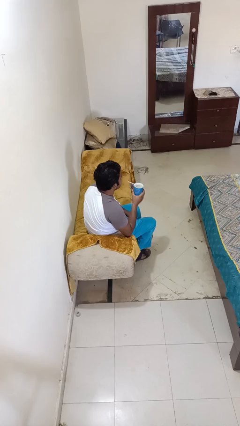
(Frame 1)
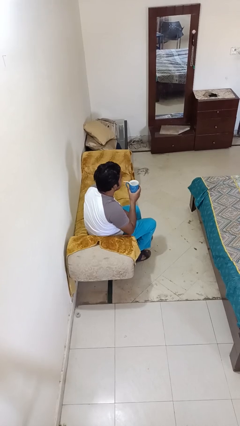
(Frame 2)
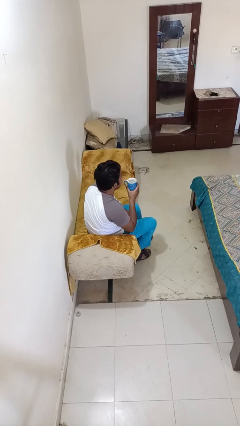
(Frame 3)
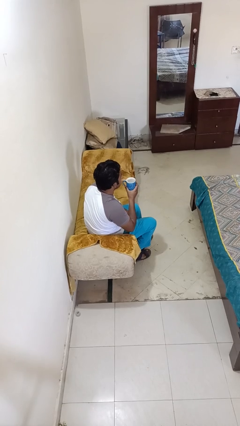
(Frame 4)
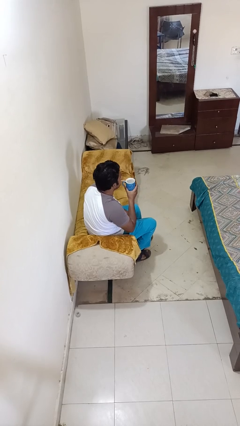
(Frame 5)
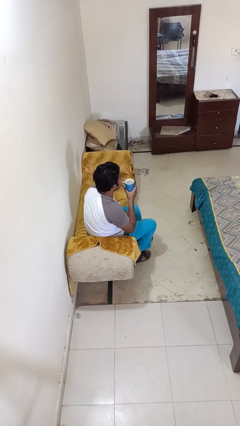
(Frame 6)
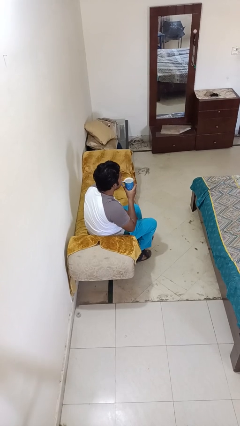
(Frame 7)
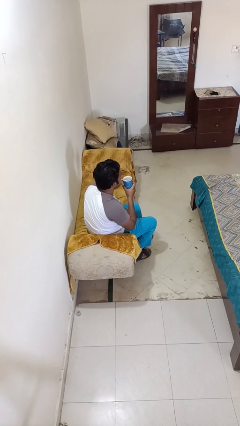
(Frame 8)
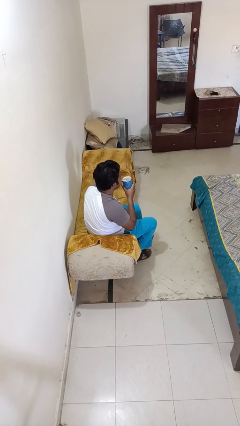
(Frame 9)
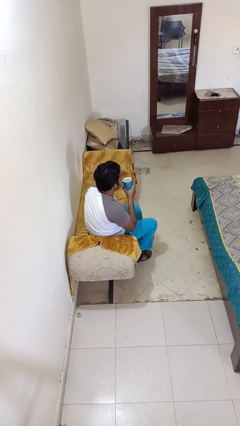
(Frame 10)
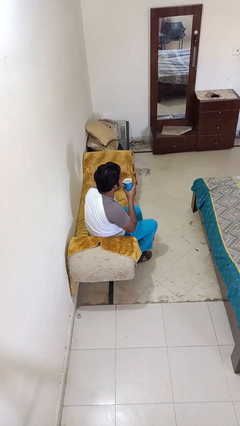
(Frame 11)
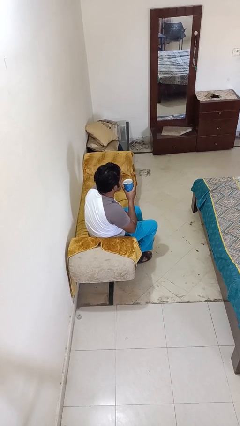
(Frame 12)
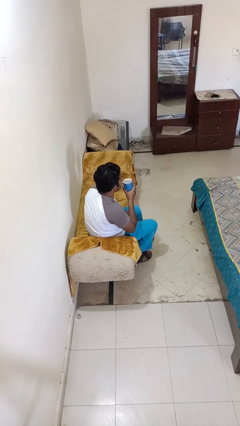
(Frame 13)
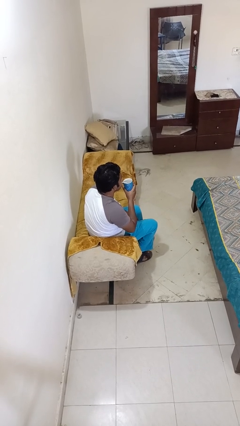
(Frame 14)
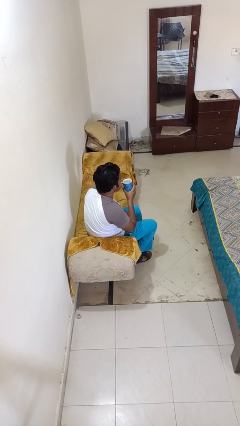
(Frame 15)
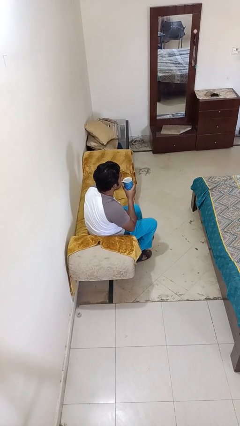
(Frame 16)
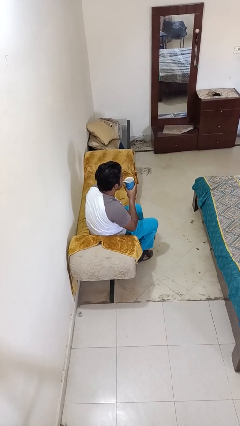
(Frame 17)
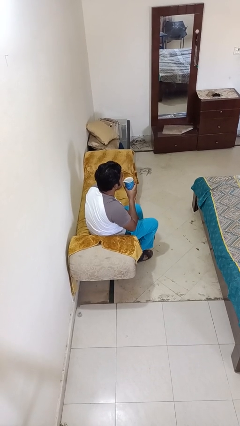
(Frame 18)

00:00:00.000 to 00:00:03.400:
person drinks from straw

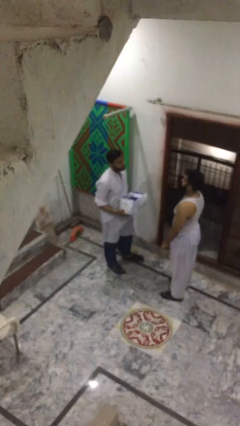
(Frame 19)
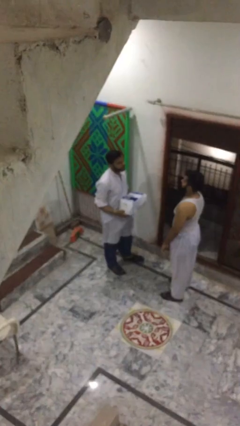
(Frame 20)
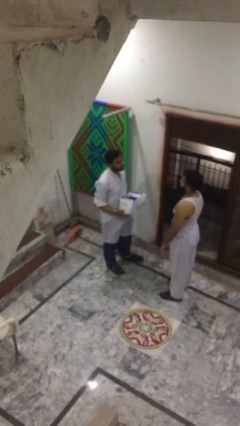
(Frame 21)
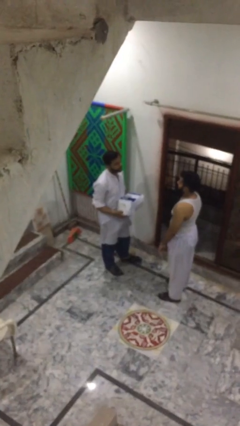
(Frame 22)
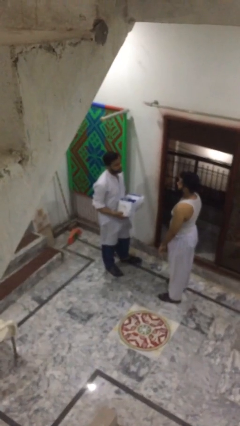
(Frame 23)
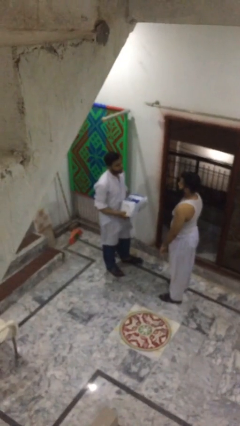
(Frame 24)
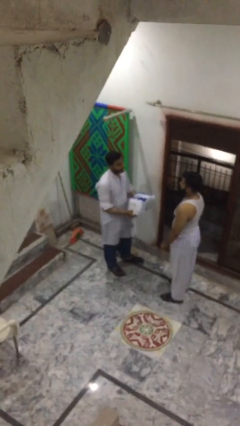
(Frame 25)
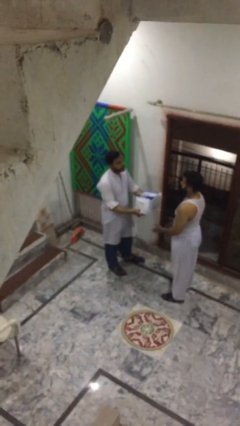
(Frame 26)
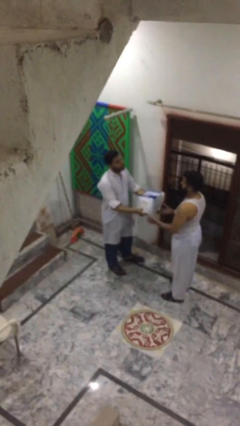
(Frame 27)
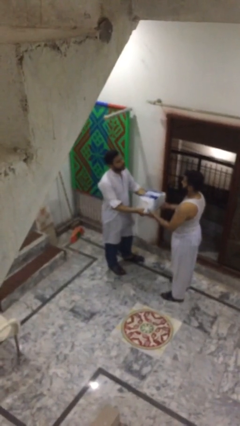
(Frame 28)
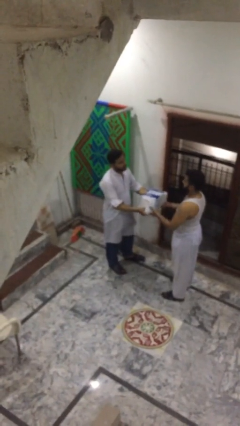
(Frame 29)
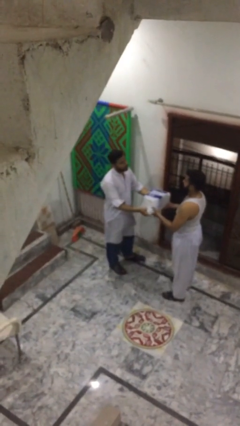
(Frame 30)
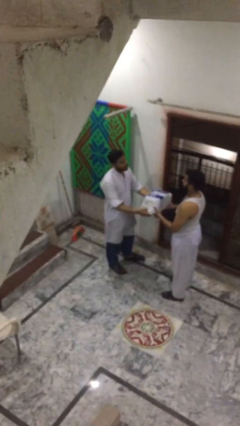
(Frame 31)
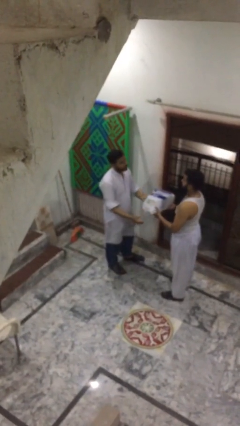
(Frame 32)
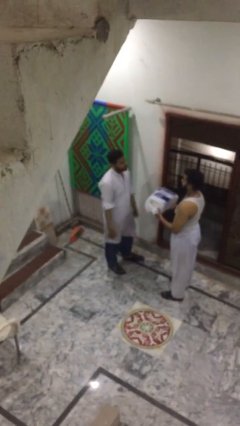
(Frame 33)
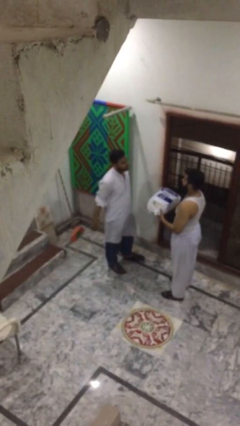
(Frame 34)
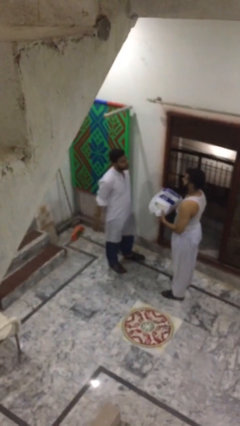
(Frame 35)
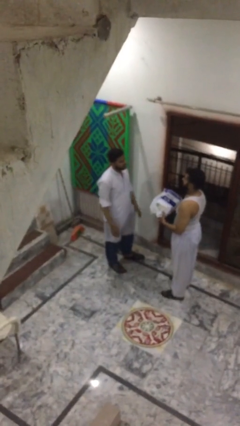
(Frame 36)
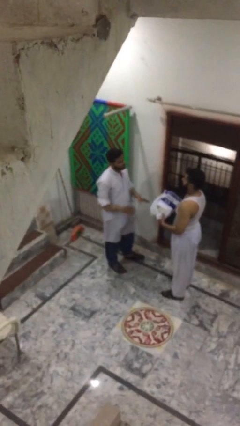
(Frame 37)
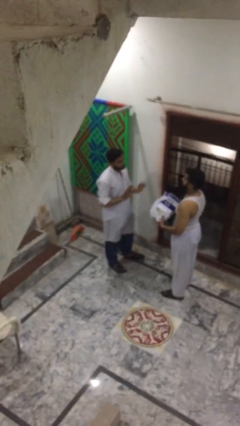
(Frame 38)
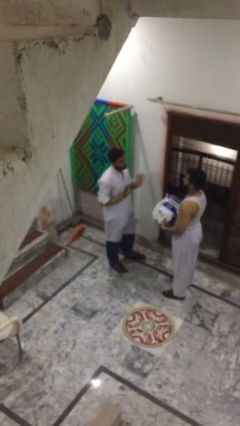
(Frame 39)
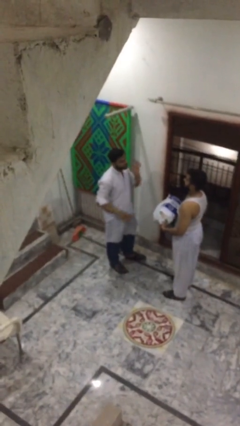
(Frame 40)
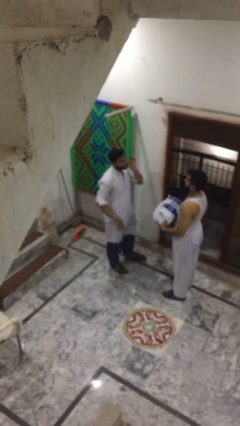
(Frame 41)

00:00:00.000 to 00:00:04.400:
person transfers object to person

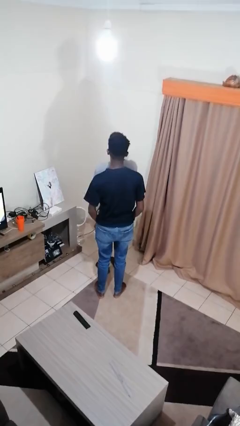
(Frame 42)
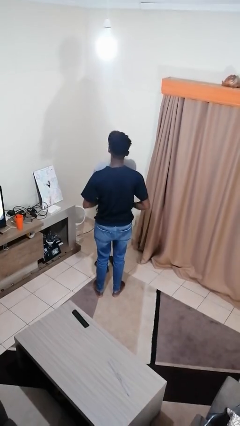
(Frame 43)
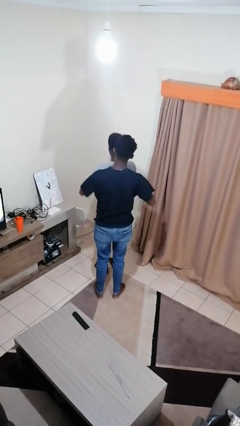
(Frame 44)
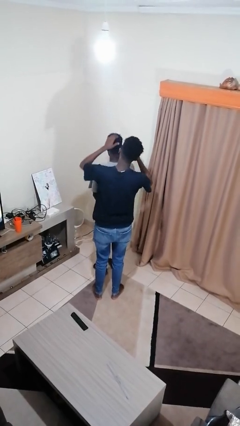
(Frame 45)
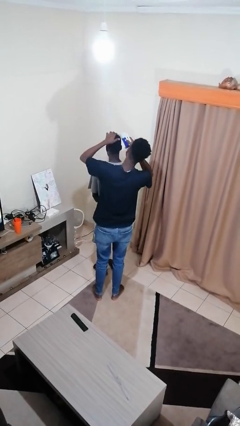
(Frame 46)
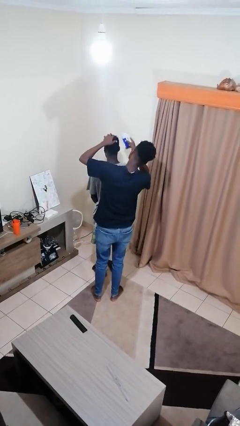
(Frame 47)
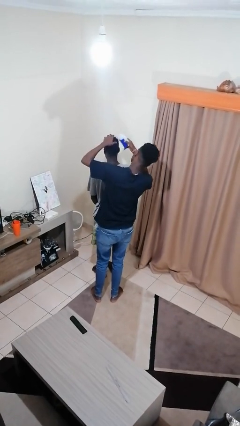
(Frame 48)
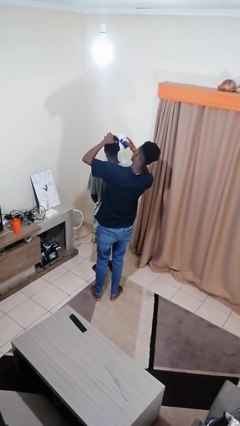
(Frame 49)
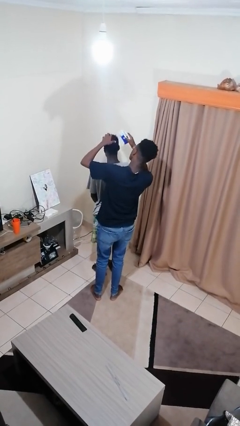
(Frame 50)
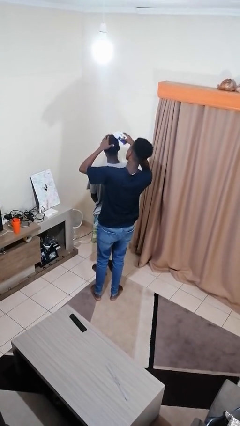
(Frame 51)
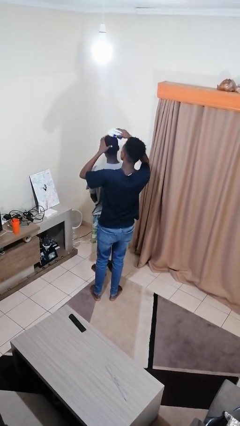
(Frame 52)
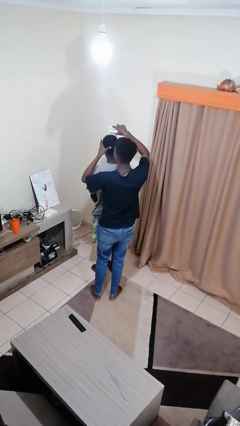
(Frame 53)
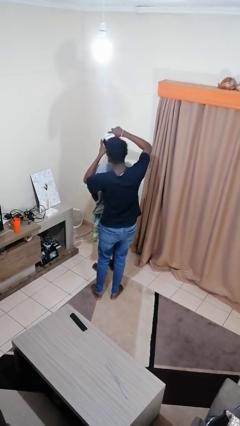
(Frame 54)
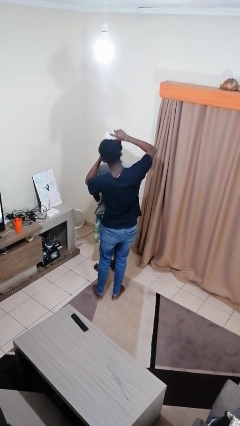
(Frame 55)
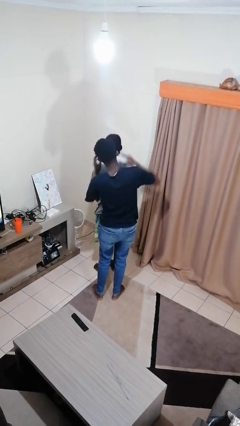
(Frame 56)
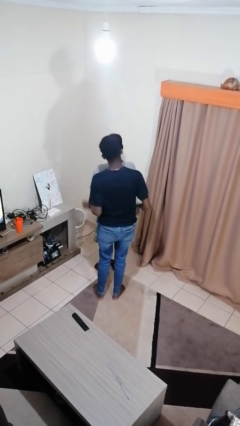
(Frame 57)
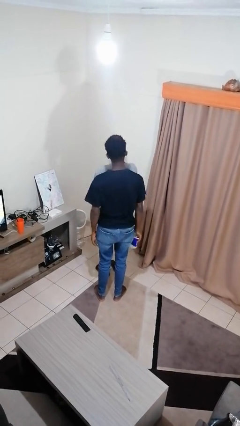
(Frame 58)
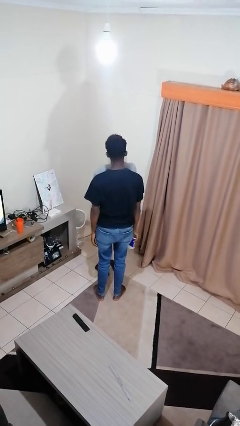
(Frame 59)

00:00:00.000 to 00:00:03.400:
person brushes hair of person

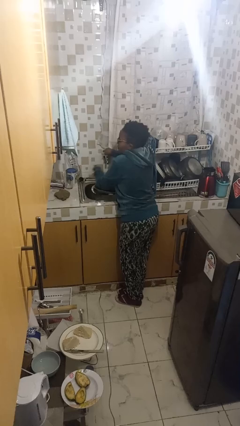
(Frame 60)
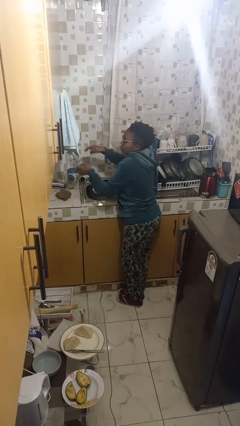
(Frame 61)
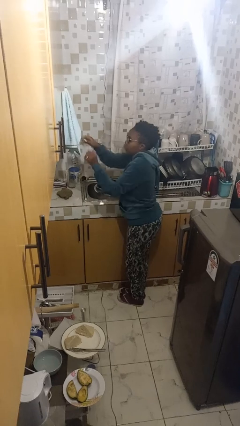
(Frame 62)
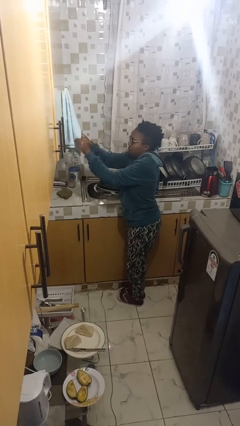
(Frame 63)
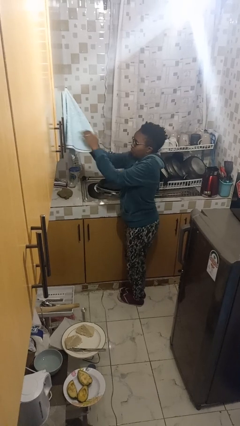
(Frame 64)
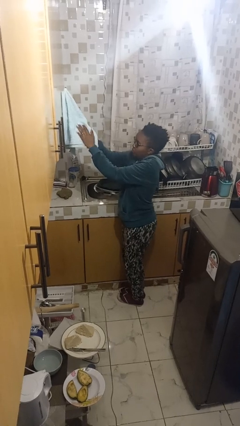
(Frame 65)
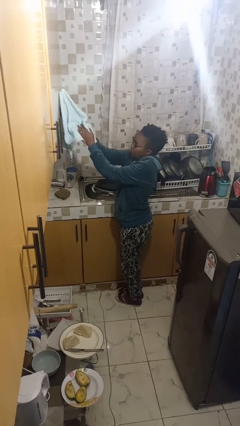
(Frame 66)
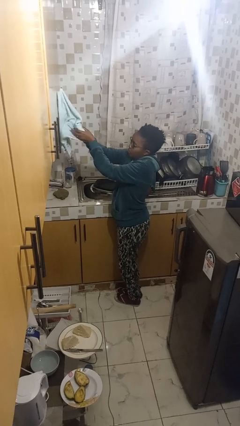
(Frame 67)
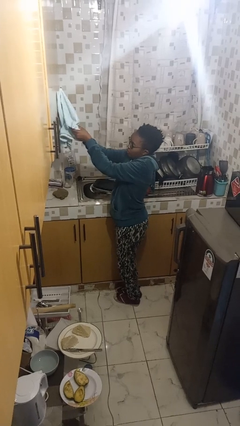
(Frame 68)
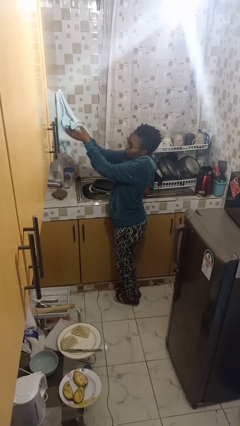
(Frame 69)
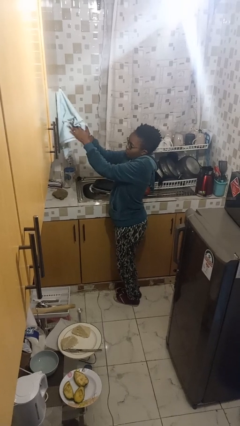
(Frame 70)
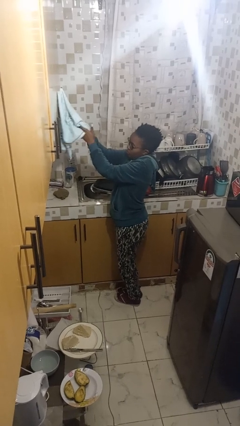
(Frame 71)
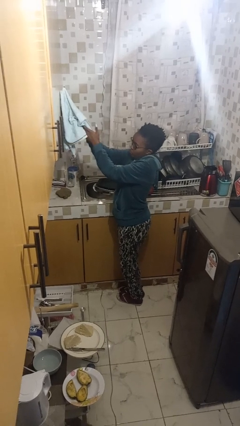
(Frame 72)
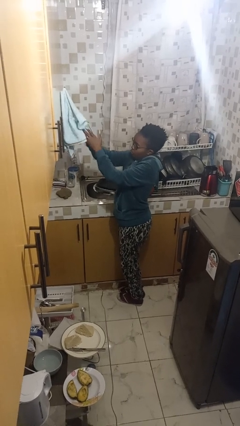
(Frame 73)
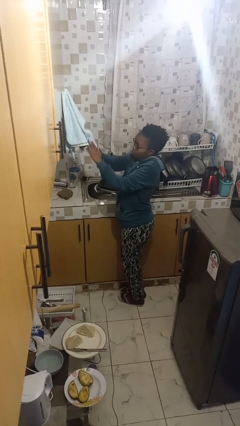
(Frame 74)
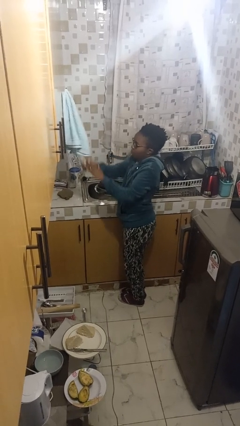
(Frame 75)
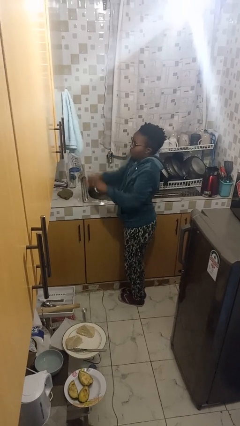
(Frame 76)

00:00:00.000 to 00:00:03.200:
person dries hands with towel

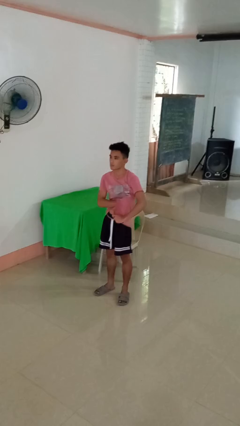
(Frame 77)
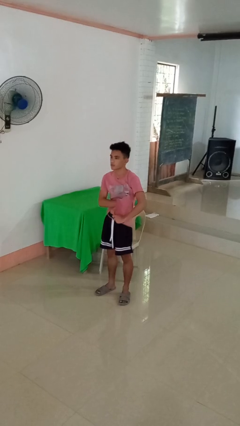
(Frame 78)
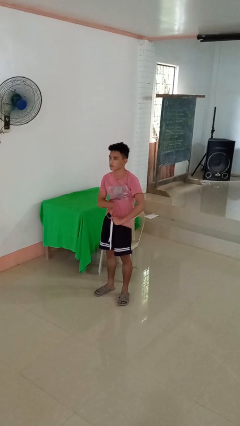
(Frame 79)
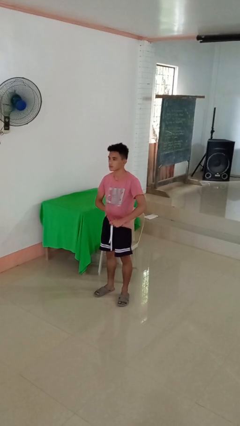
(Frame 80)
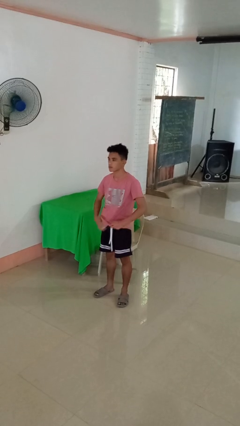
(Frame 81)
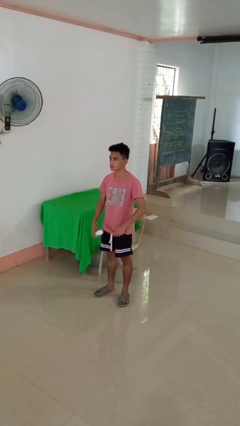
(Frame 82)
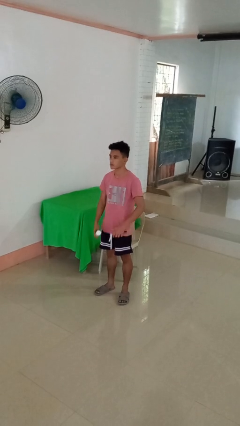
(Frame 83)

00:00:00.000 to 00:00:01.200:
person applies deodorant

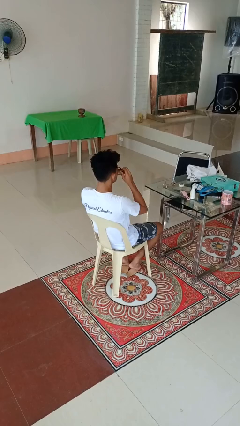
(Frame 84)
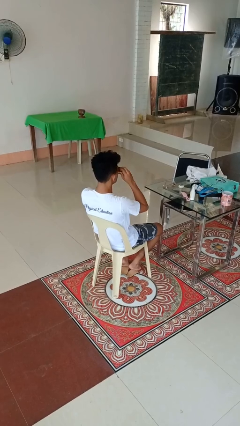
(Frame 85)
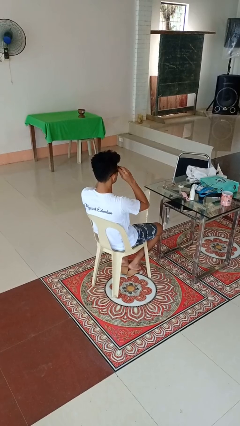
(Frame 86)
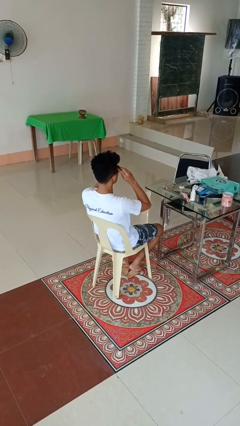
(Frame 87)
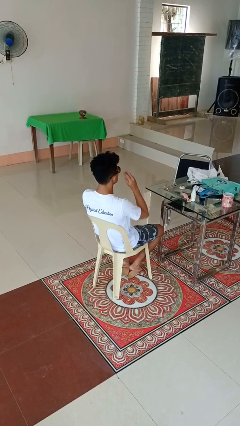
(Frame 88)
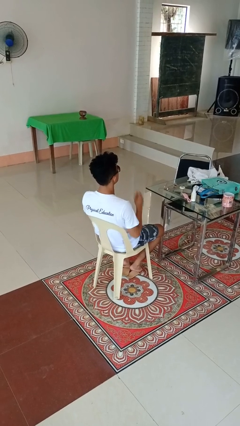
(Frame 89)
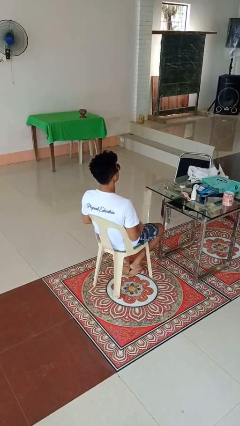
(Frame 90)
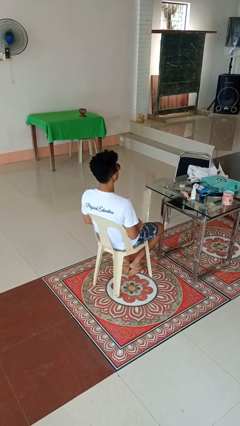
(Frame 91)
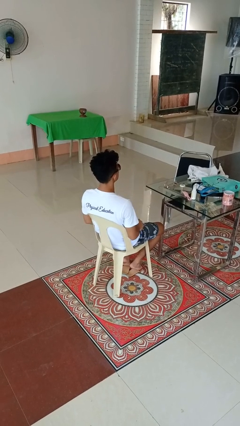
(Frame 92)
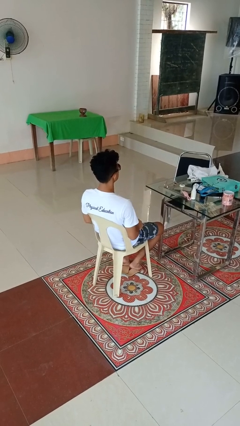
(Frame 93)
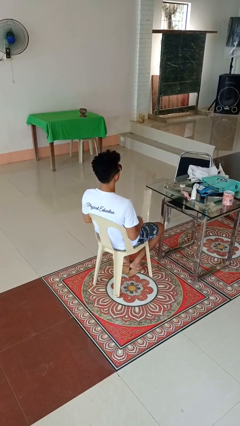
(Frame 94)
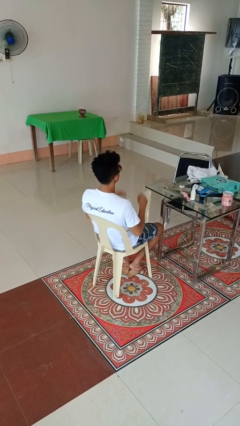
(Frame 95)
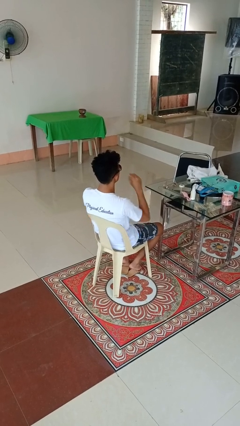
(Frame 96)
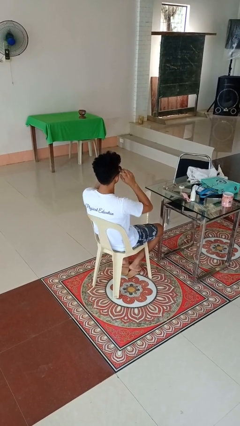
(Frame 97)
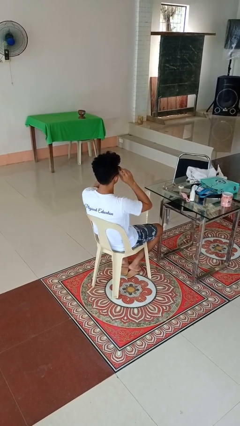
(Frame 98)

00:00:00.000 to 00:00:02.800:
person puts on sunglasses
